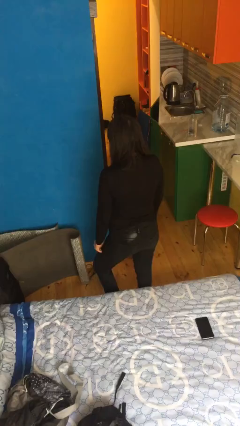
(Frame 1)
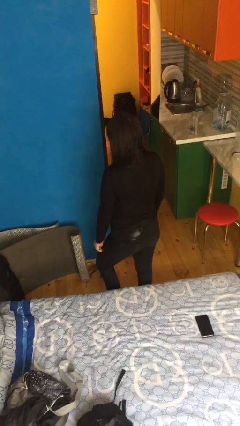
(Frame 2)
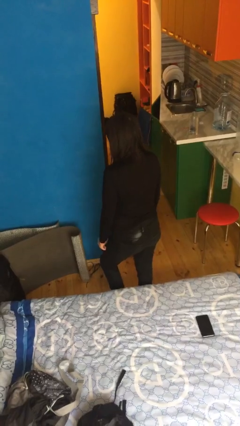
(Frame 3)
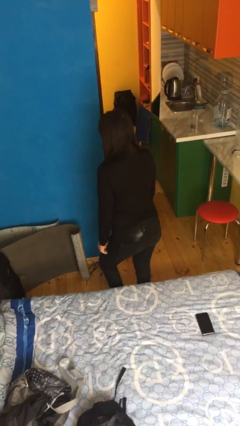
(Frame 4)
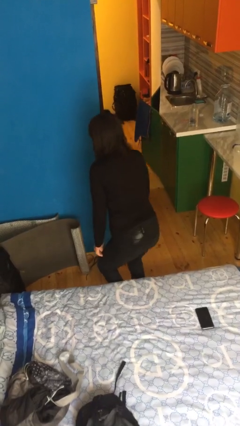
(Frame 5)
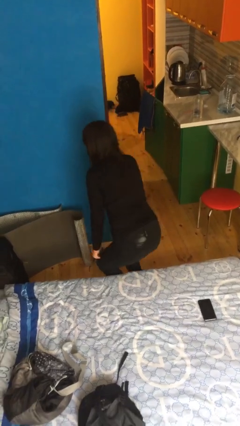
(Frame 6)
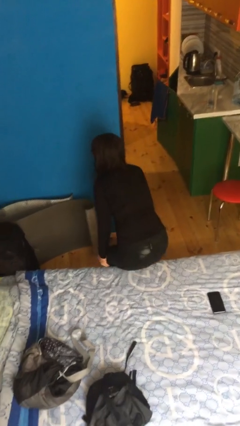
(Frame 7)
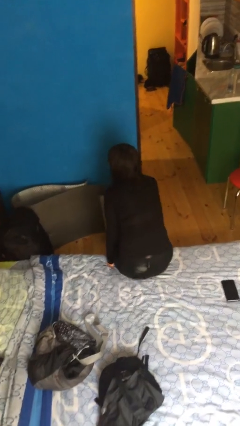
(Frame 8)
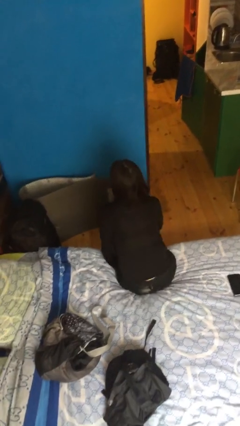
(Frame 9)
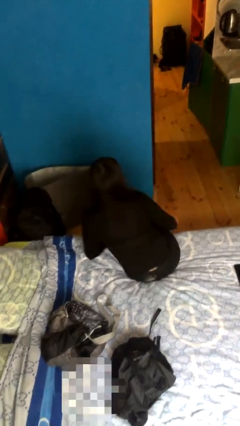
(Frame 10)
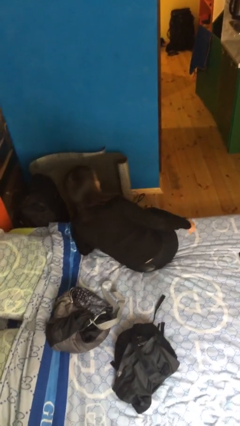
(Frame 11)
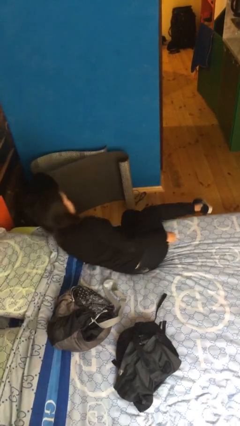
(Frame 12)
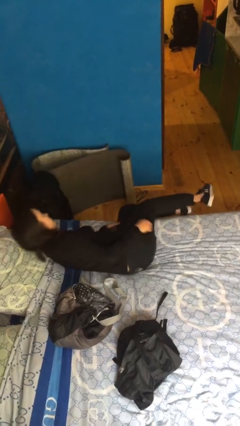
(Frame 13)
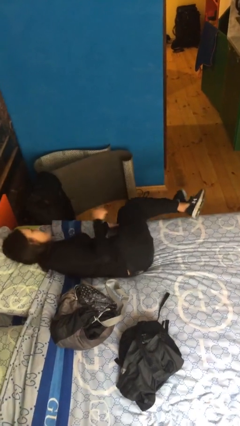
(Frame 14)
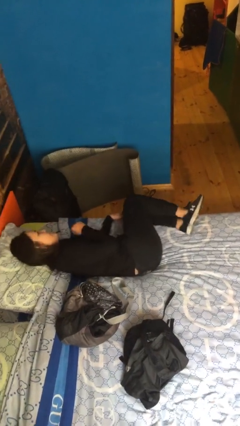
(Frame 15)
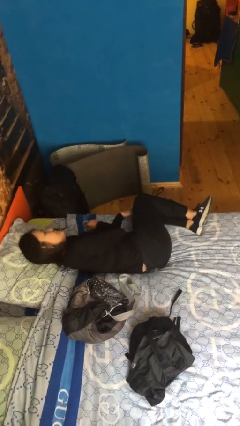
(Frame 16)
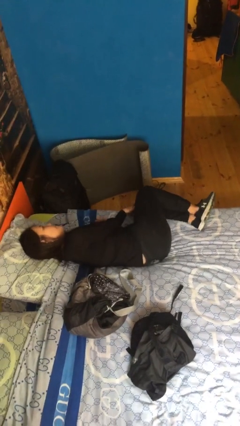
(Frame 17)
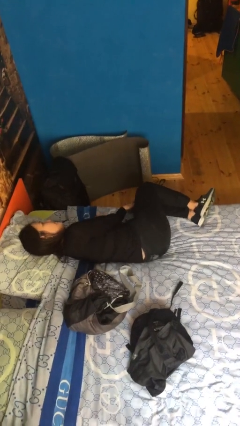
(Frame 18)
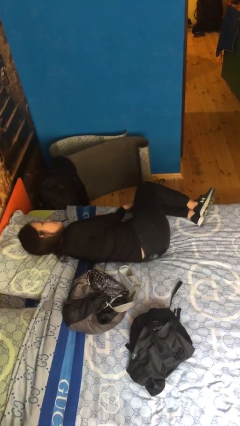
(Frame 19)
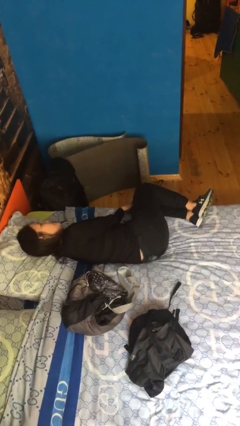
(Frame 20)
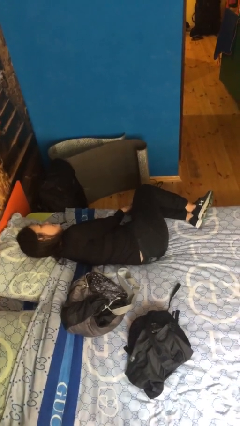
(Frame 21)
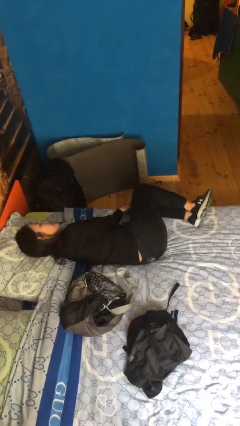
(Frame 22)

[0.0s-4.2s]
person lies down on bed

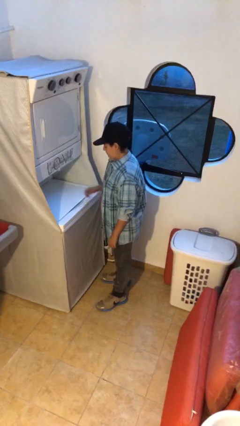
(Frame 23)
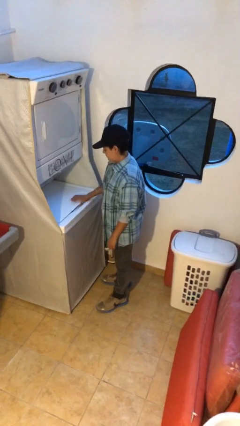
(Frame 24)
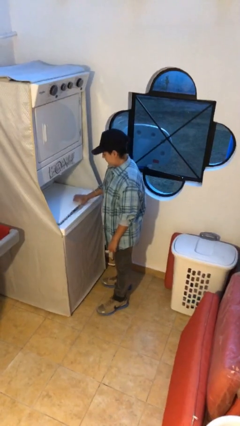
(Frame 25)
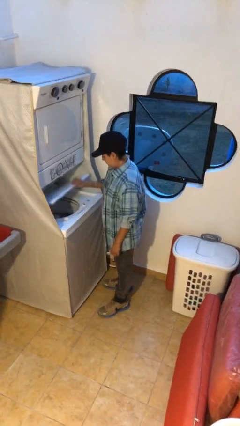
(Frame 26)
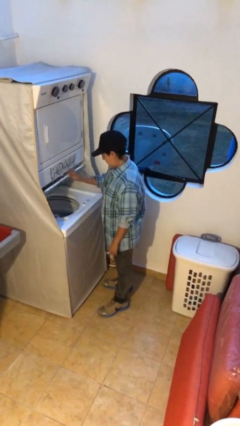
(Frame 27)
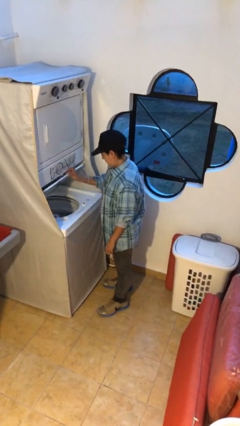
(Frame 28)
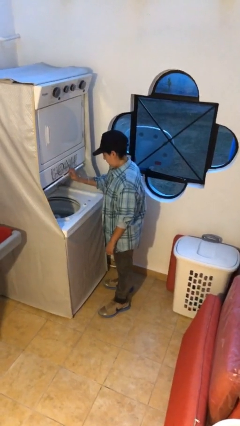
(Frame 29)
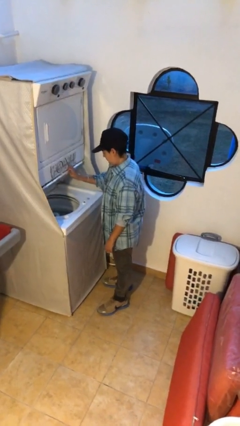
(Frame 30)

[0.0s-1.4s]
person opens clothes washer

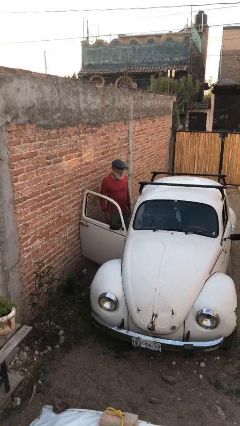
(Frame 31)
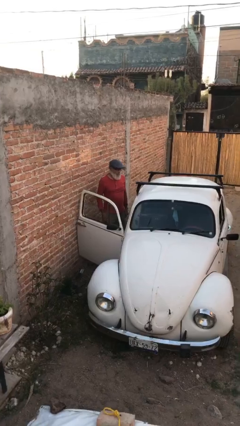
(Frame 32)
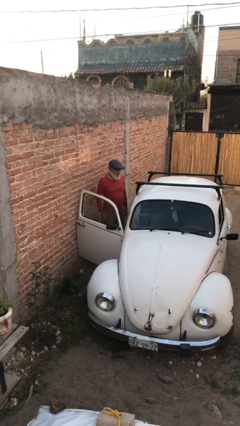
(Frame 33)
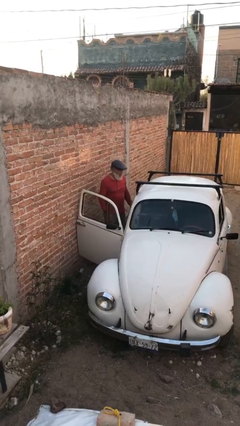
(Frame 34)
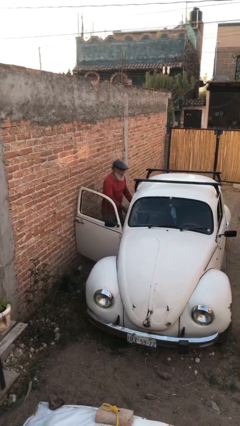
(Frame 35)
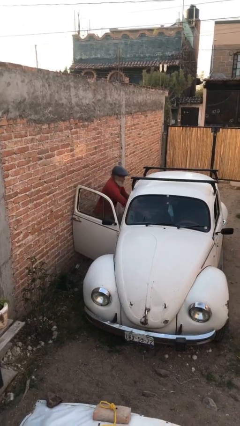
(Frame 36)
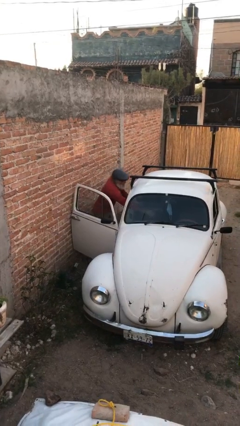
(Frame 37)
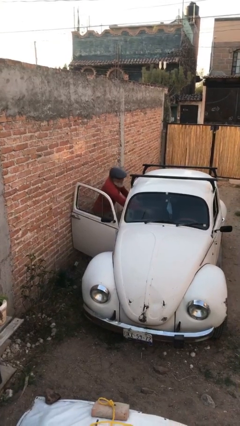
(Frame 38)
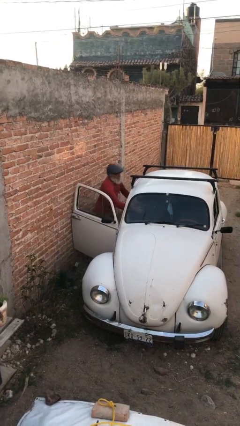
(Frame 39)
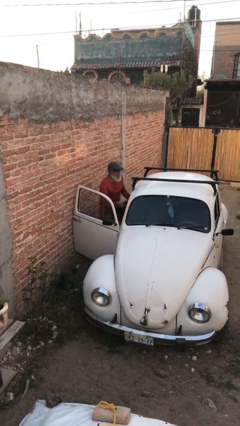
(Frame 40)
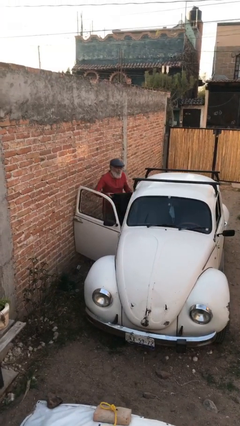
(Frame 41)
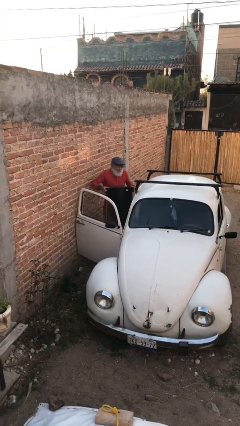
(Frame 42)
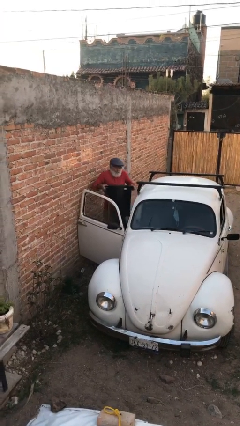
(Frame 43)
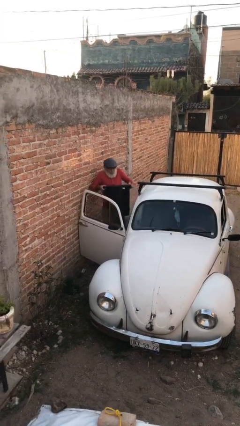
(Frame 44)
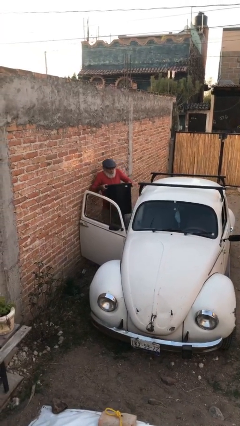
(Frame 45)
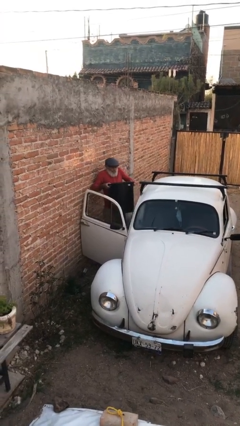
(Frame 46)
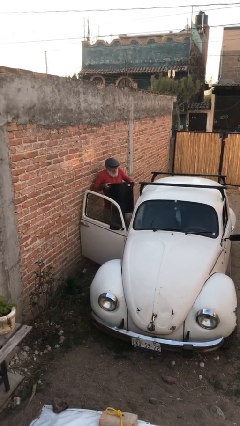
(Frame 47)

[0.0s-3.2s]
person unloads car

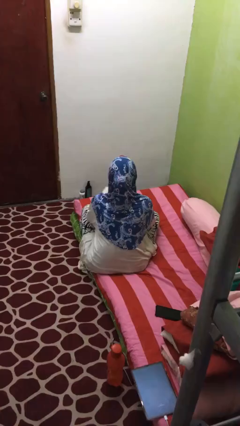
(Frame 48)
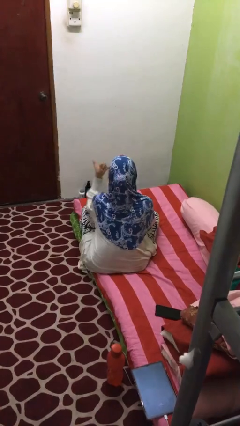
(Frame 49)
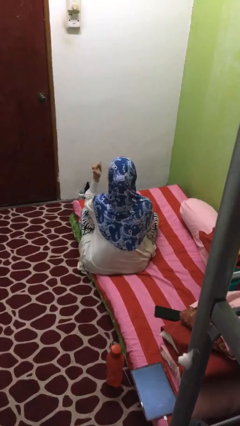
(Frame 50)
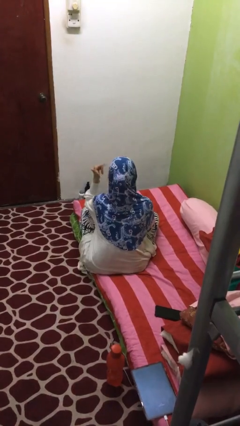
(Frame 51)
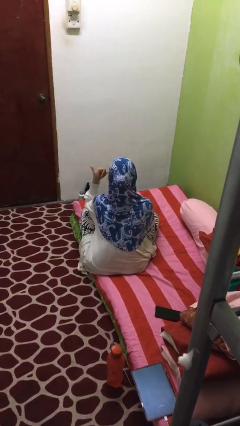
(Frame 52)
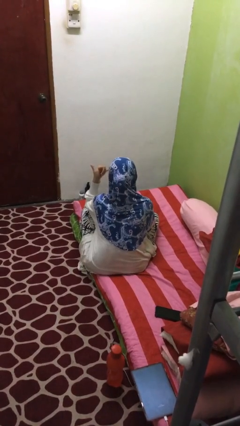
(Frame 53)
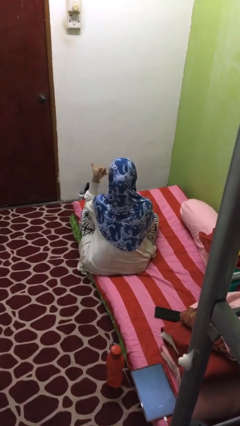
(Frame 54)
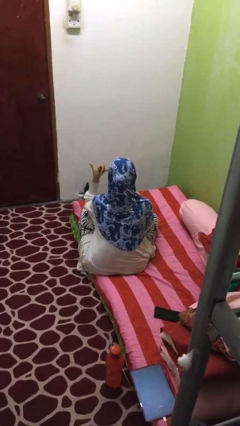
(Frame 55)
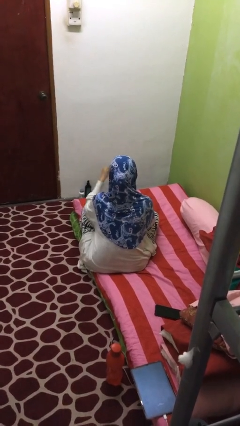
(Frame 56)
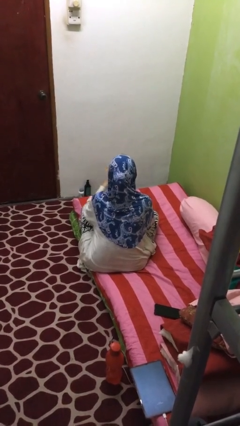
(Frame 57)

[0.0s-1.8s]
person gestures hang loose

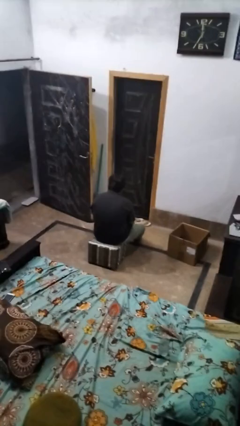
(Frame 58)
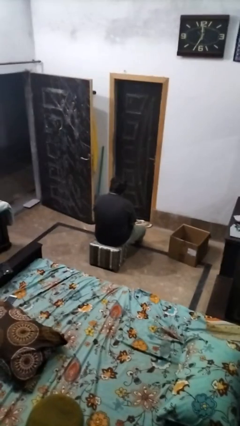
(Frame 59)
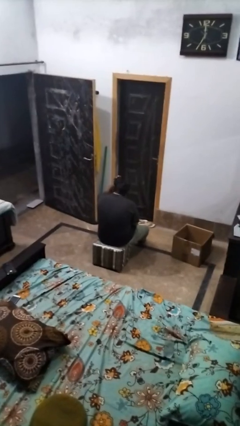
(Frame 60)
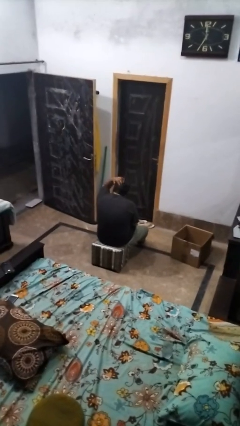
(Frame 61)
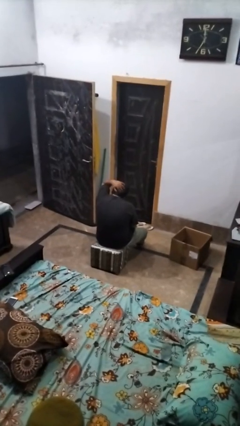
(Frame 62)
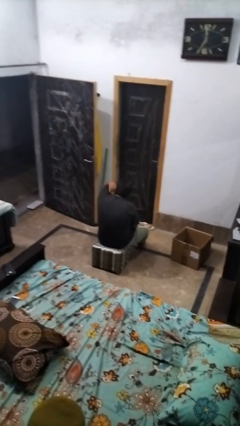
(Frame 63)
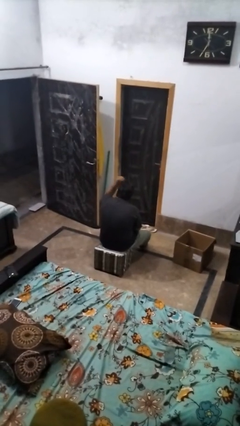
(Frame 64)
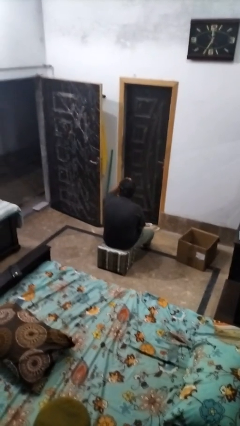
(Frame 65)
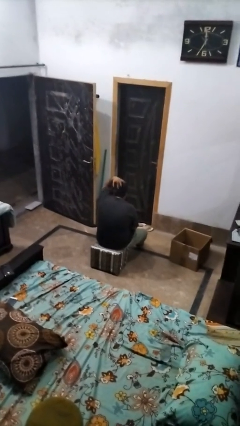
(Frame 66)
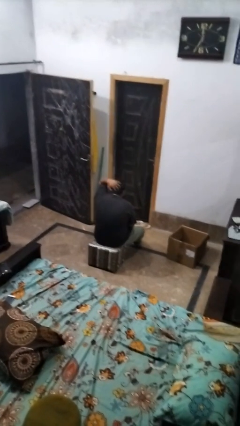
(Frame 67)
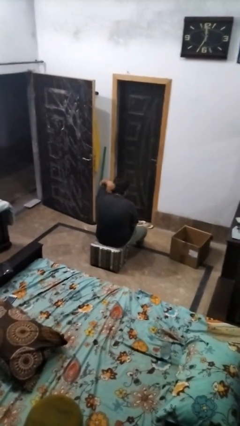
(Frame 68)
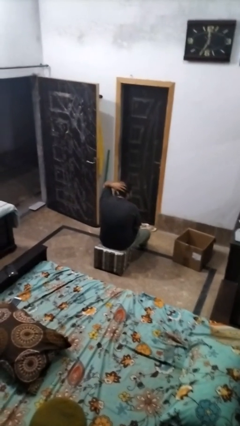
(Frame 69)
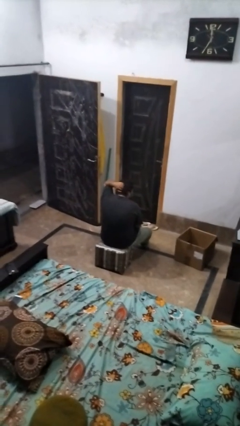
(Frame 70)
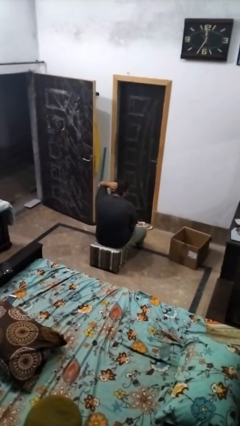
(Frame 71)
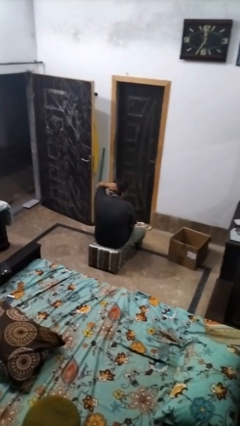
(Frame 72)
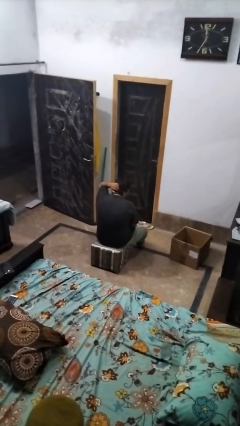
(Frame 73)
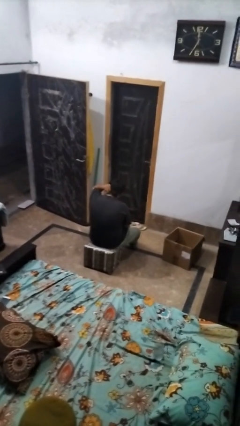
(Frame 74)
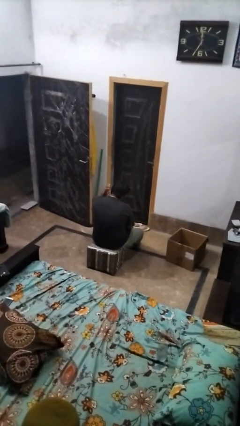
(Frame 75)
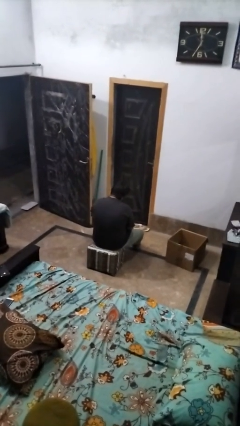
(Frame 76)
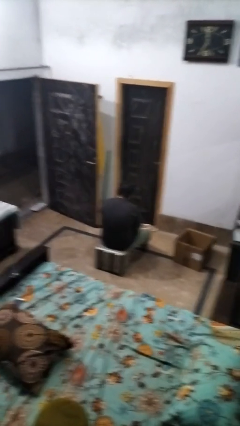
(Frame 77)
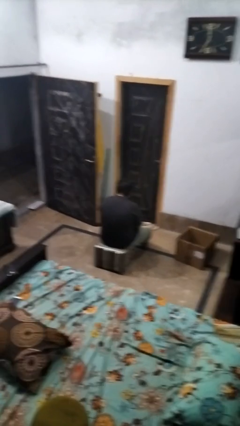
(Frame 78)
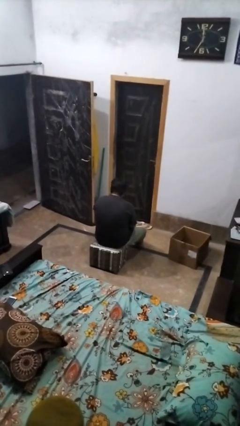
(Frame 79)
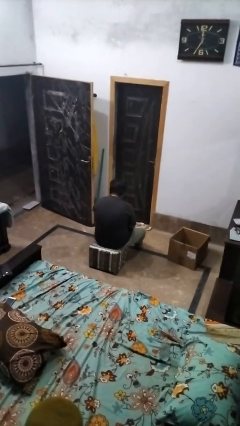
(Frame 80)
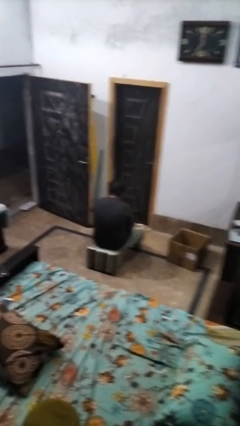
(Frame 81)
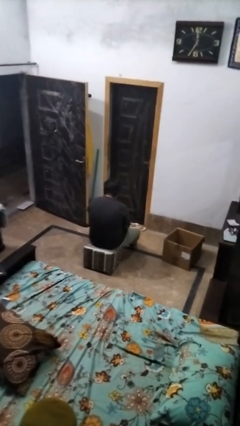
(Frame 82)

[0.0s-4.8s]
person strokes hair

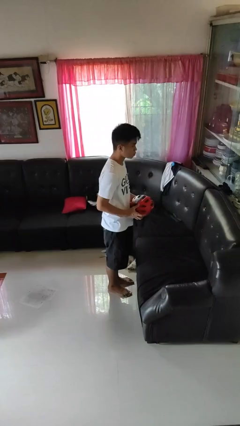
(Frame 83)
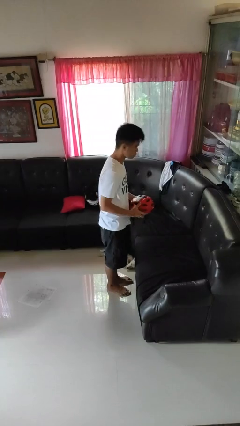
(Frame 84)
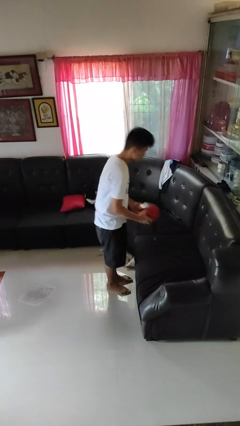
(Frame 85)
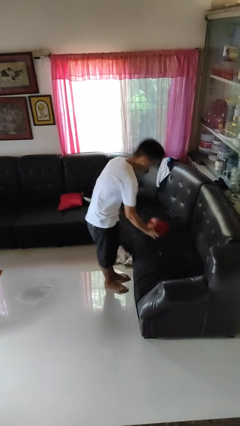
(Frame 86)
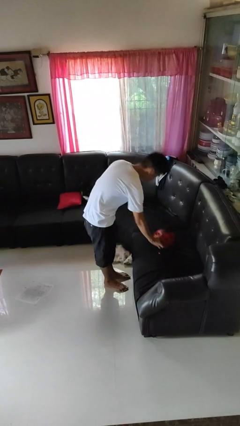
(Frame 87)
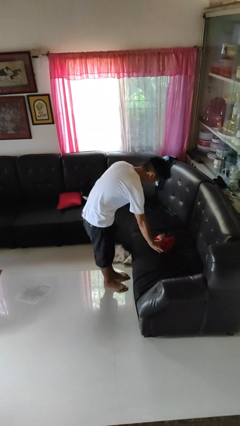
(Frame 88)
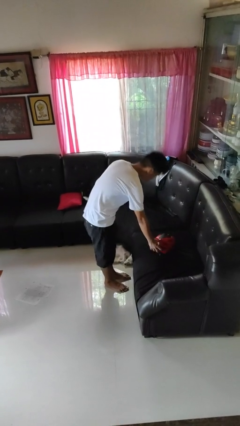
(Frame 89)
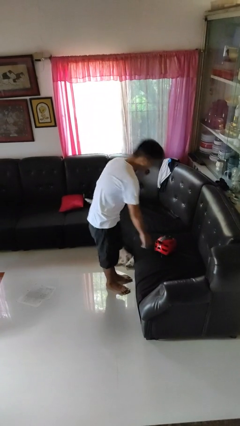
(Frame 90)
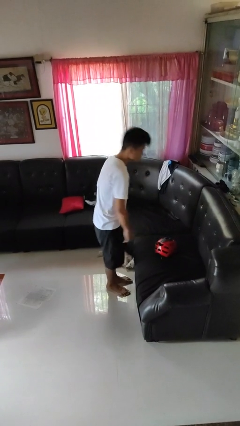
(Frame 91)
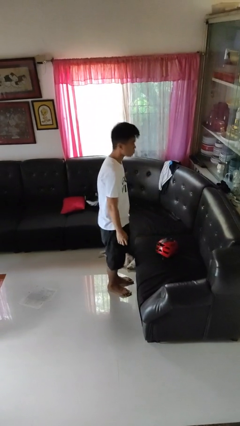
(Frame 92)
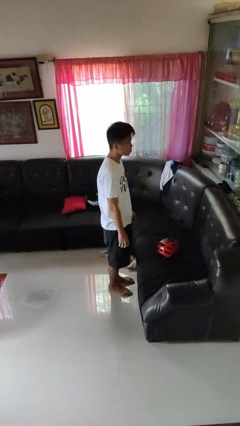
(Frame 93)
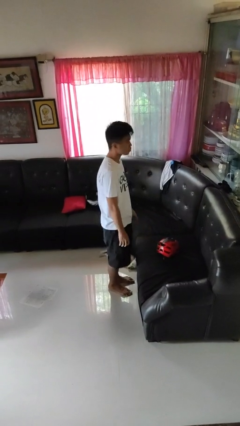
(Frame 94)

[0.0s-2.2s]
person puts down object on couch
